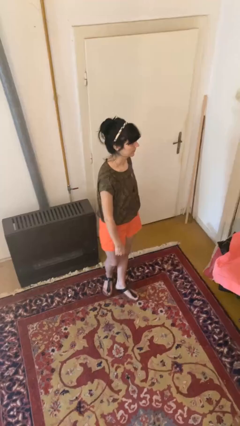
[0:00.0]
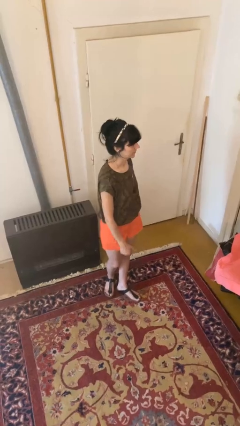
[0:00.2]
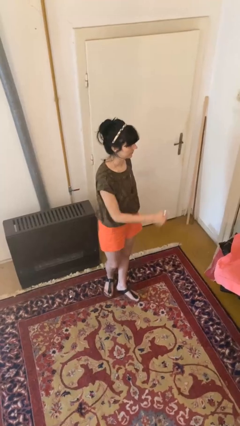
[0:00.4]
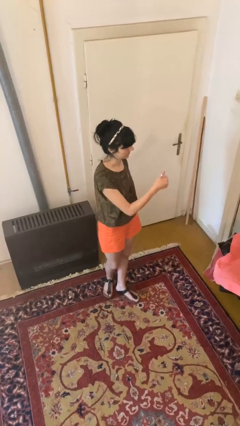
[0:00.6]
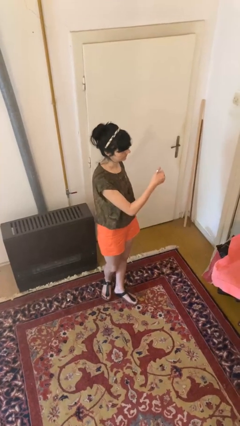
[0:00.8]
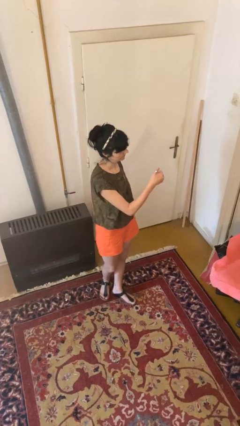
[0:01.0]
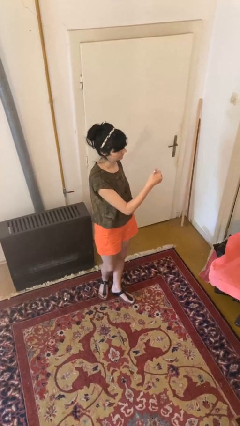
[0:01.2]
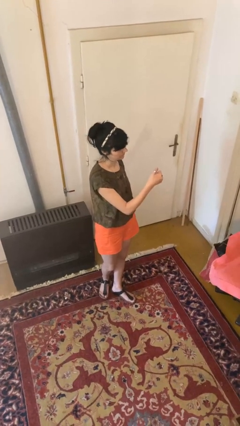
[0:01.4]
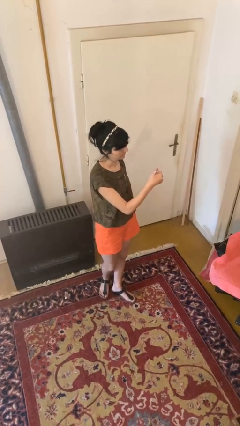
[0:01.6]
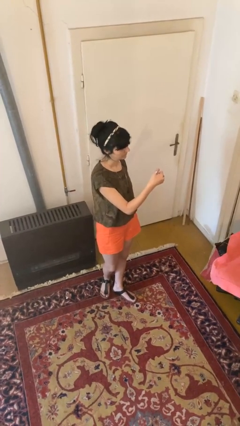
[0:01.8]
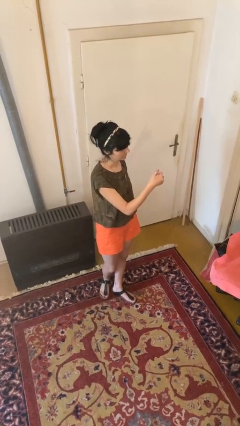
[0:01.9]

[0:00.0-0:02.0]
person gestures thumbs up

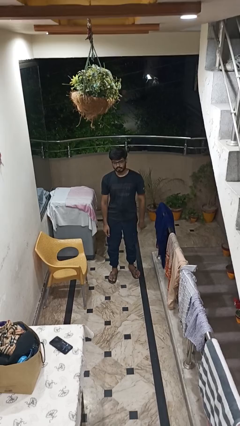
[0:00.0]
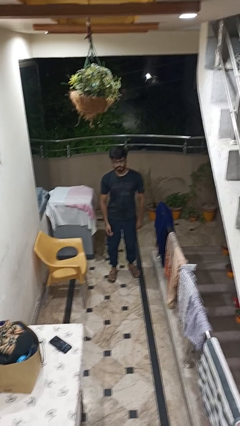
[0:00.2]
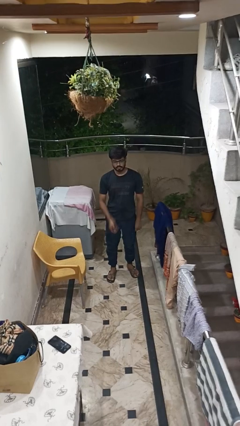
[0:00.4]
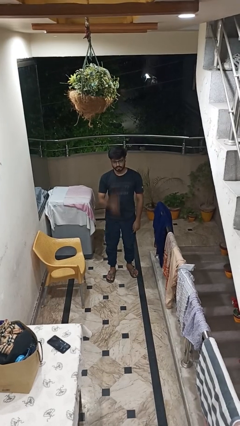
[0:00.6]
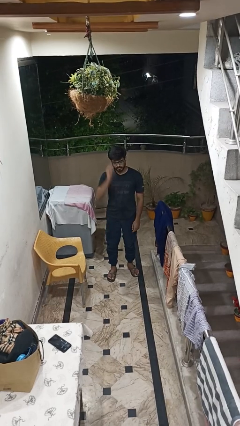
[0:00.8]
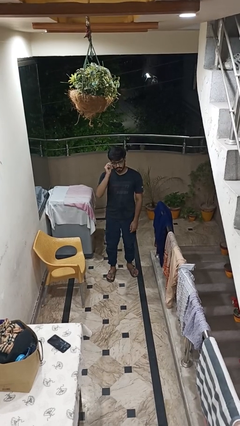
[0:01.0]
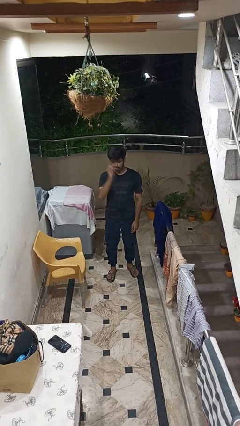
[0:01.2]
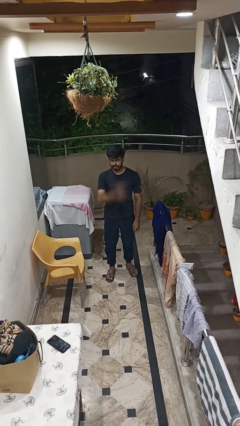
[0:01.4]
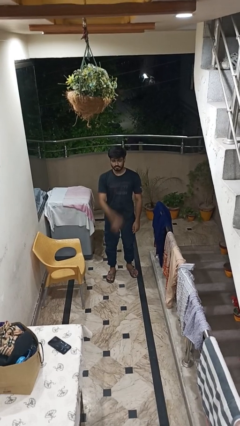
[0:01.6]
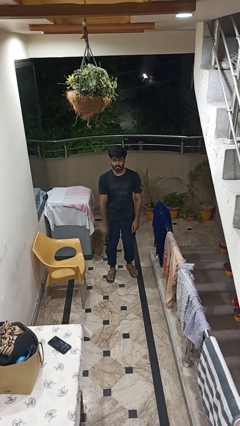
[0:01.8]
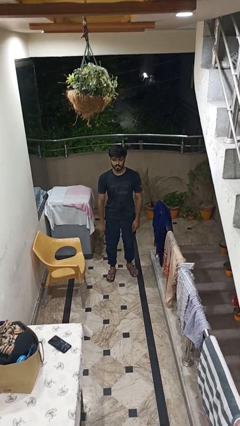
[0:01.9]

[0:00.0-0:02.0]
person takes off glasses

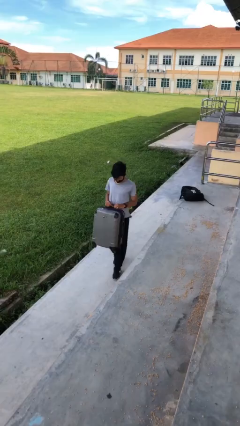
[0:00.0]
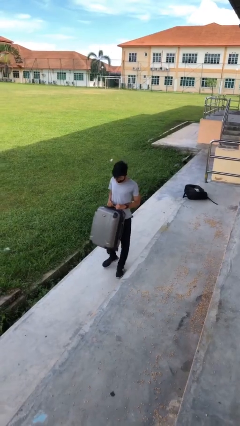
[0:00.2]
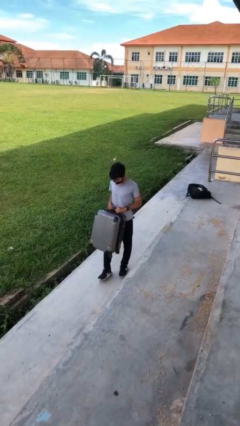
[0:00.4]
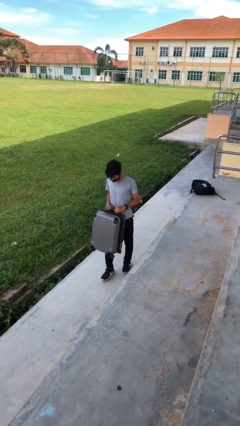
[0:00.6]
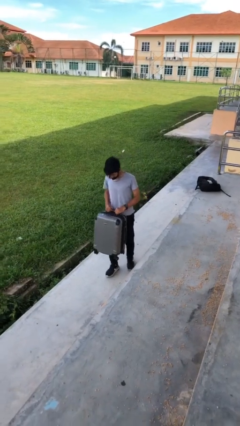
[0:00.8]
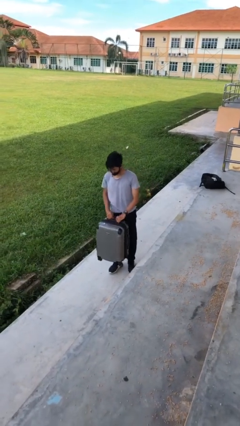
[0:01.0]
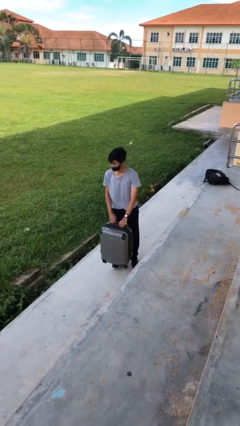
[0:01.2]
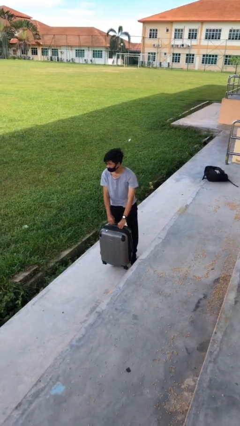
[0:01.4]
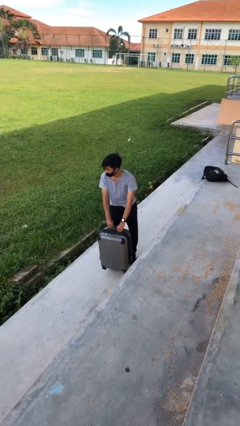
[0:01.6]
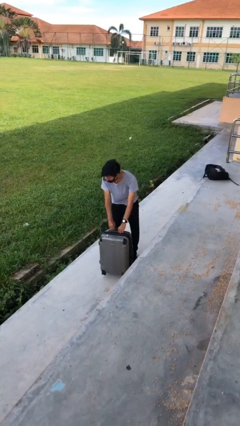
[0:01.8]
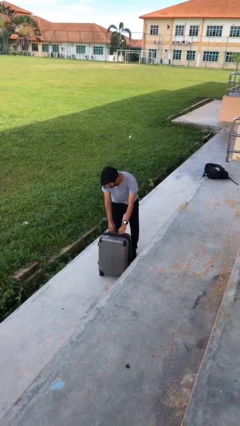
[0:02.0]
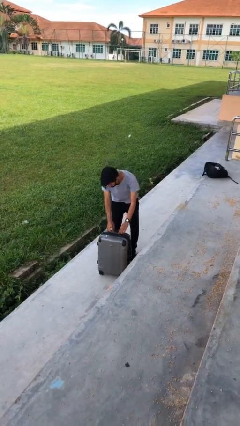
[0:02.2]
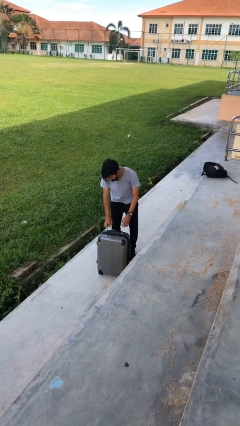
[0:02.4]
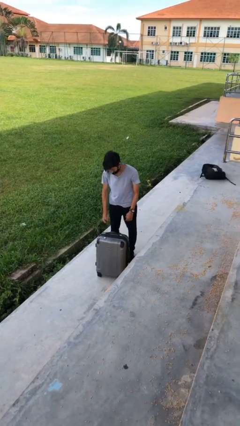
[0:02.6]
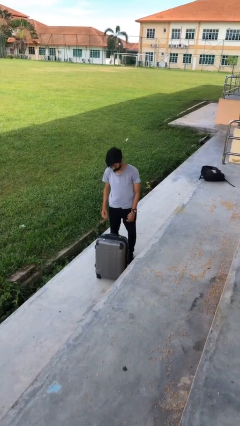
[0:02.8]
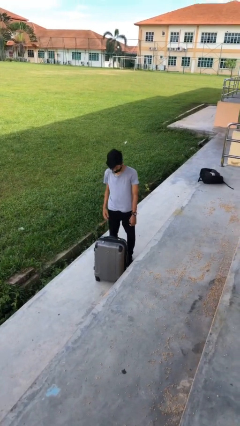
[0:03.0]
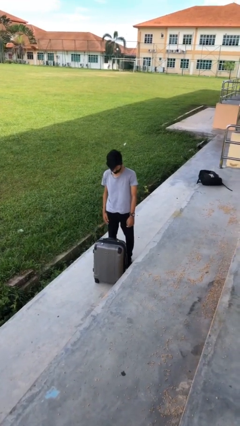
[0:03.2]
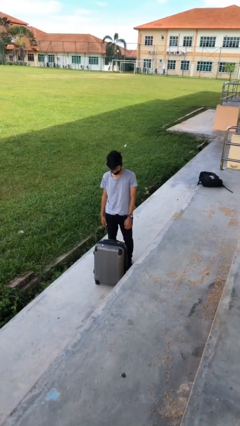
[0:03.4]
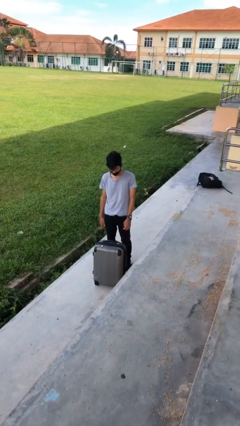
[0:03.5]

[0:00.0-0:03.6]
person puts down object on floor

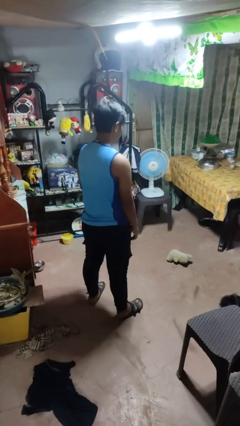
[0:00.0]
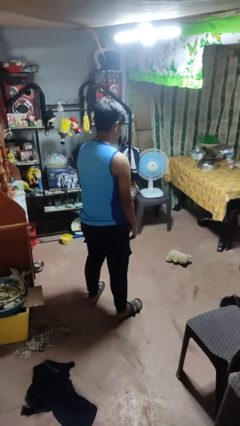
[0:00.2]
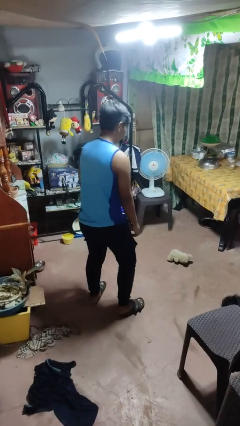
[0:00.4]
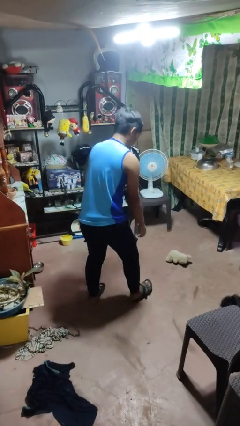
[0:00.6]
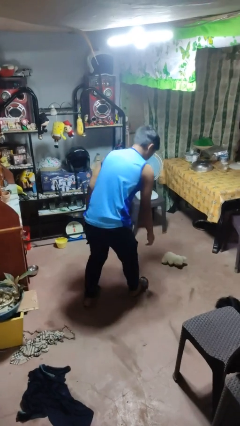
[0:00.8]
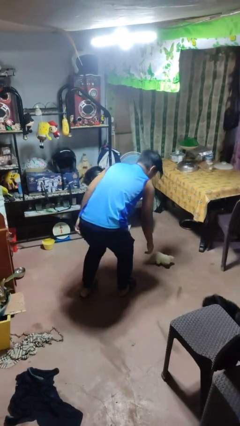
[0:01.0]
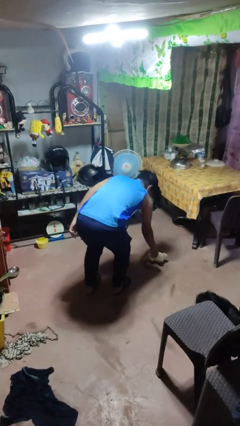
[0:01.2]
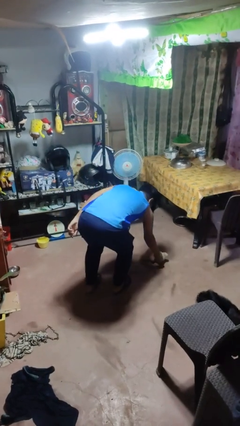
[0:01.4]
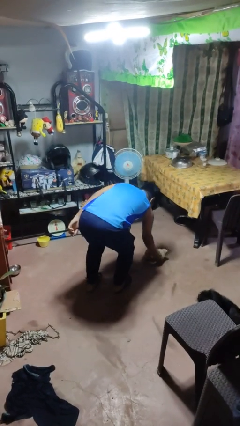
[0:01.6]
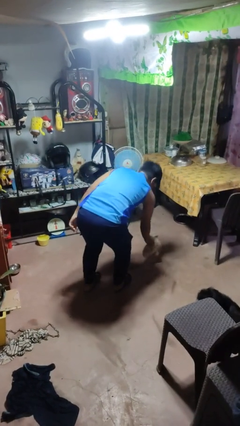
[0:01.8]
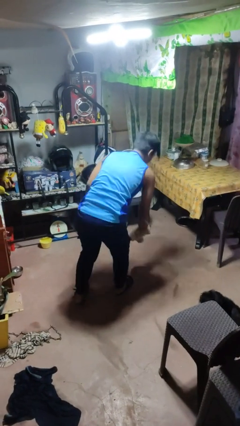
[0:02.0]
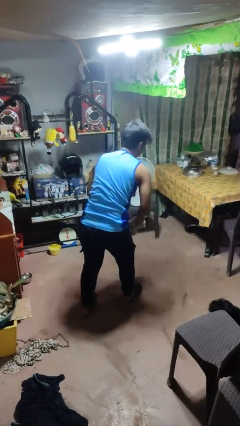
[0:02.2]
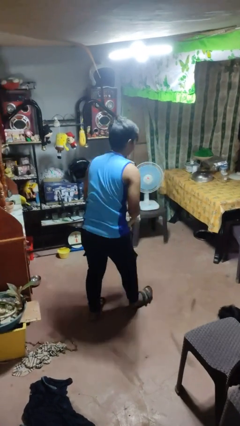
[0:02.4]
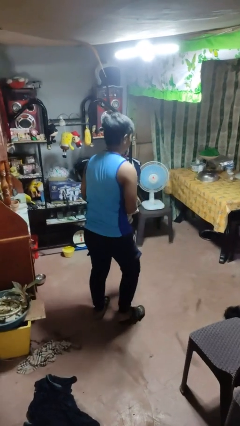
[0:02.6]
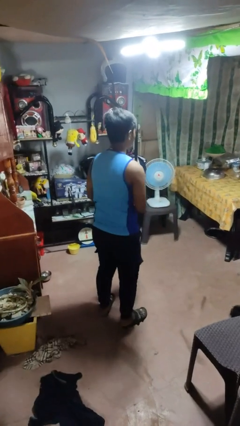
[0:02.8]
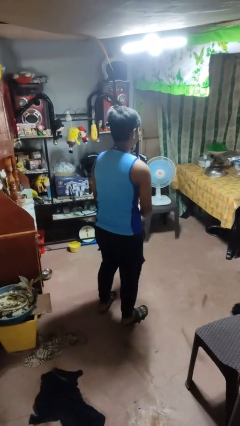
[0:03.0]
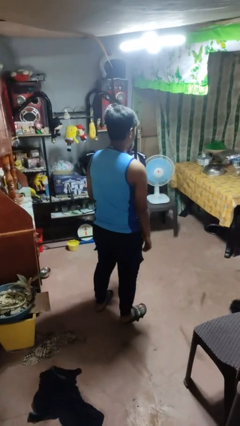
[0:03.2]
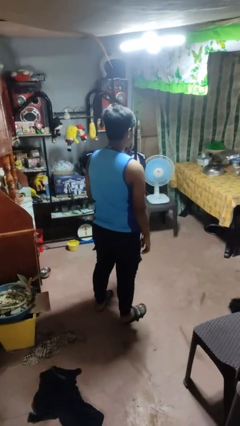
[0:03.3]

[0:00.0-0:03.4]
person picks up object from floor

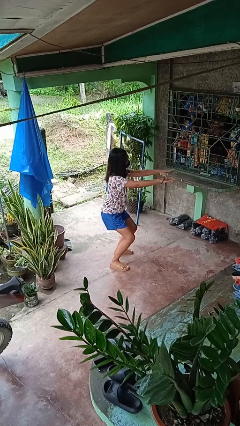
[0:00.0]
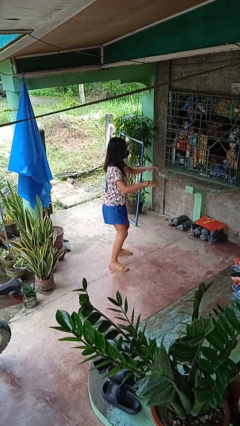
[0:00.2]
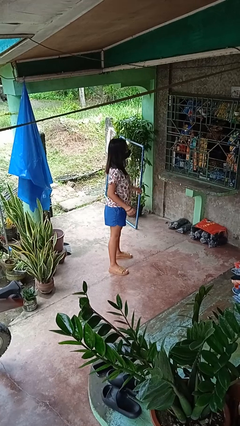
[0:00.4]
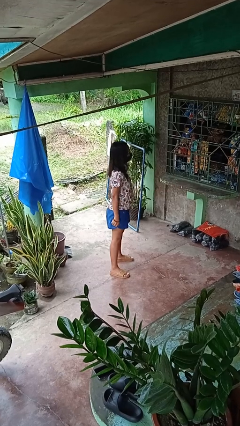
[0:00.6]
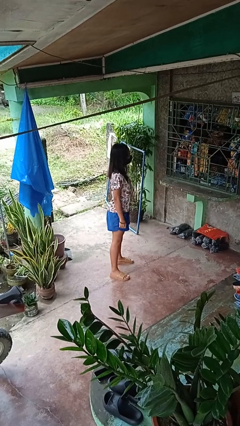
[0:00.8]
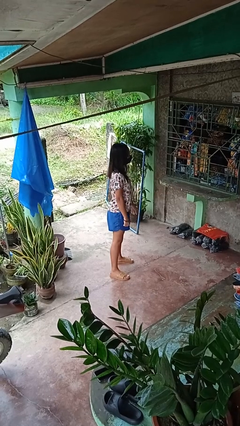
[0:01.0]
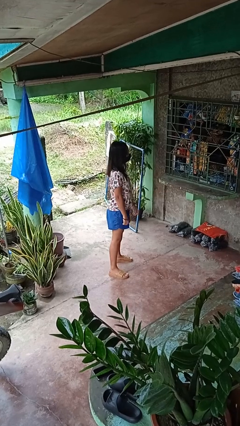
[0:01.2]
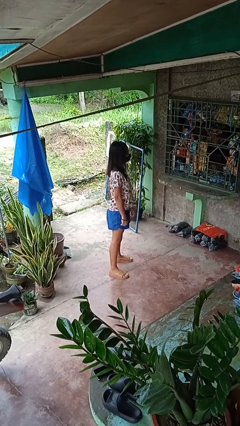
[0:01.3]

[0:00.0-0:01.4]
person stands up

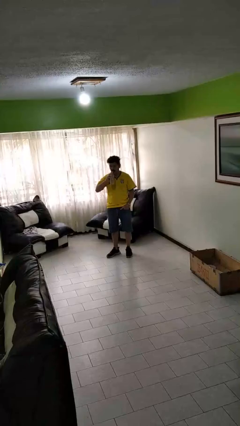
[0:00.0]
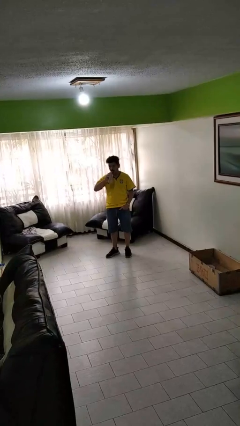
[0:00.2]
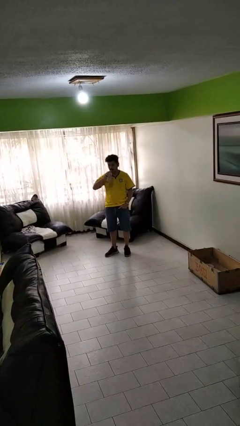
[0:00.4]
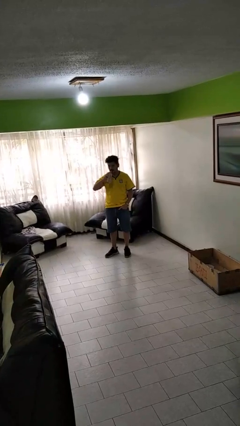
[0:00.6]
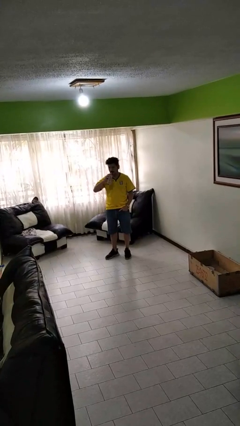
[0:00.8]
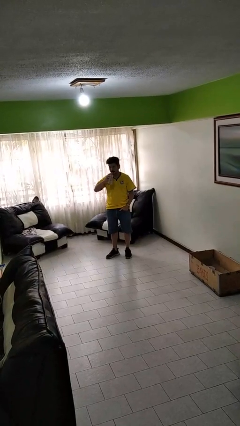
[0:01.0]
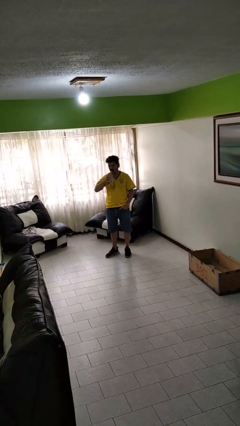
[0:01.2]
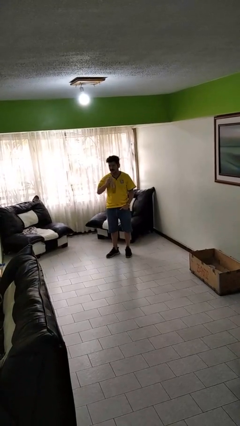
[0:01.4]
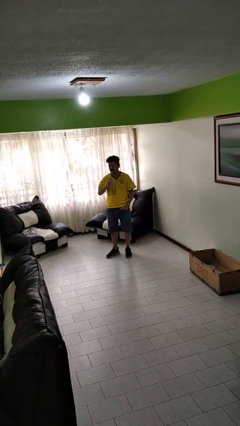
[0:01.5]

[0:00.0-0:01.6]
person drinks from straw

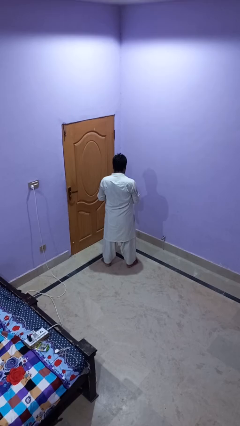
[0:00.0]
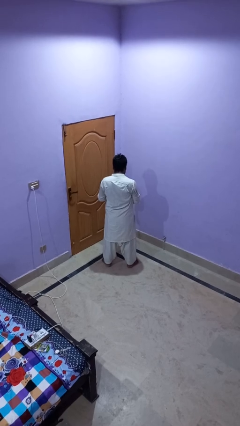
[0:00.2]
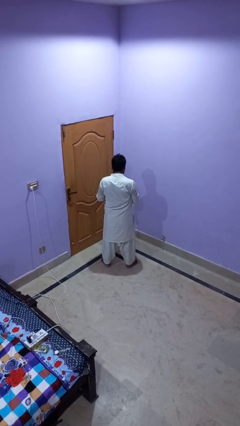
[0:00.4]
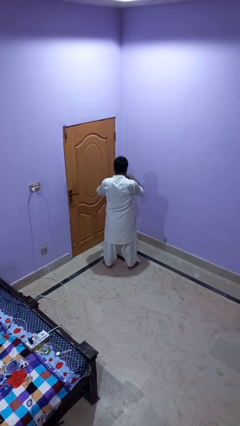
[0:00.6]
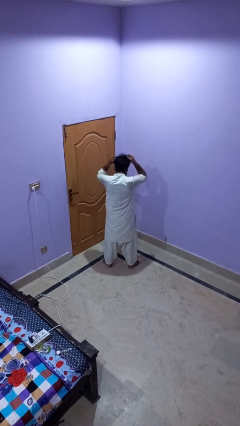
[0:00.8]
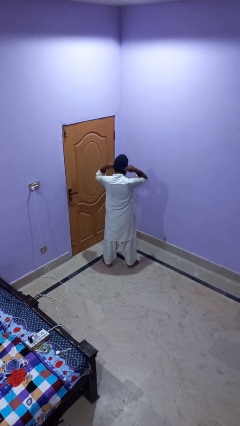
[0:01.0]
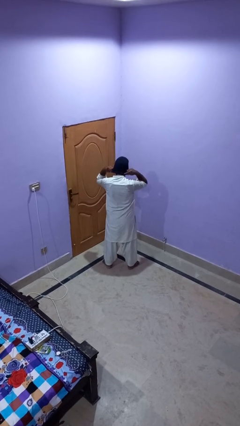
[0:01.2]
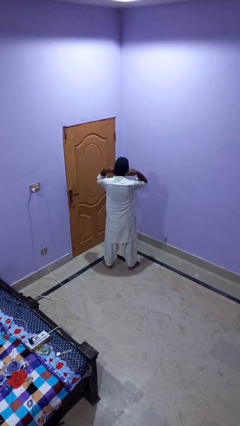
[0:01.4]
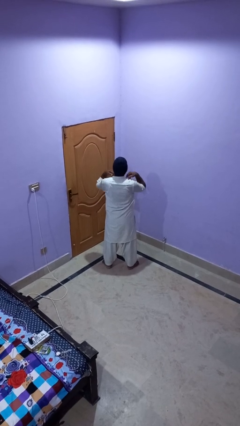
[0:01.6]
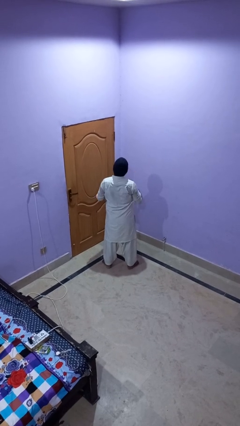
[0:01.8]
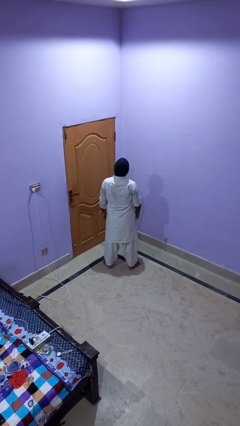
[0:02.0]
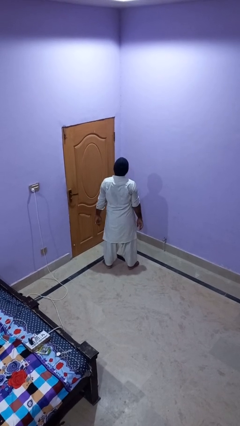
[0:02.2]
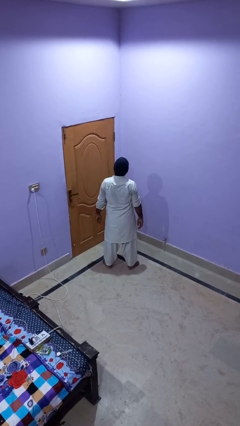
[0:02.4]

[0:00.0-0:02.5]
person puts on hat

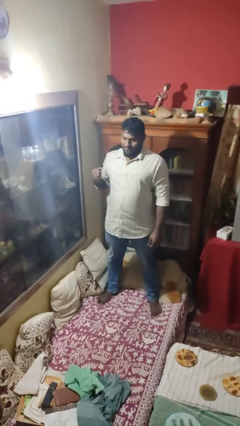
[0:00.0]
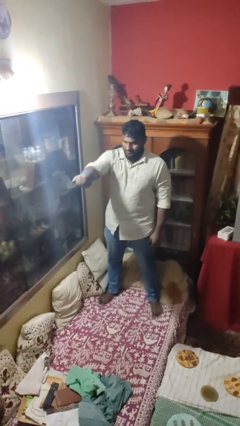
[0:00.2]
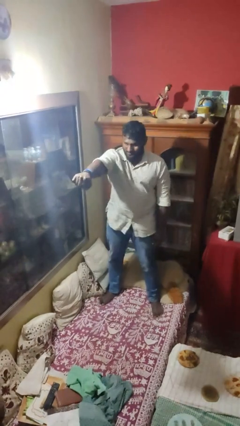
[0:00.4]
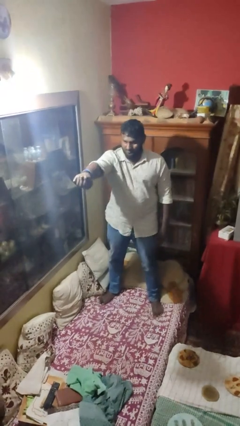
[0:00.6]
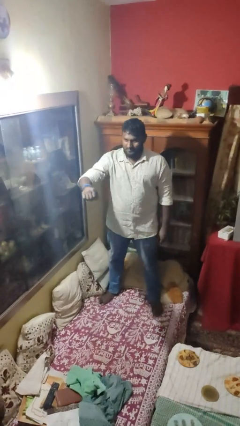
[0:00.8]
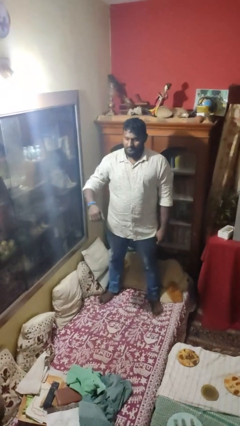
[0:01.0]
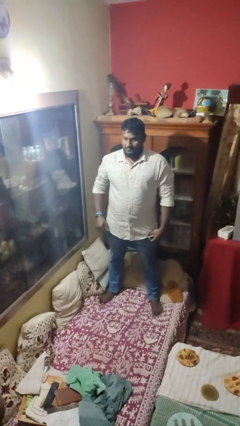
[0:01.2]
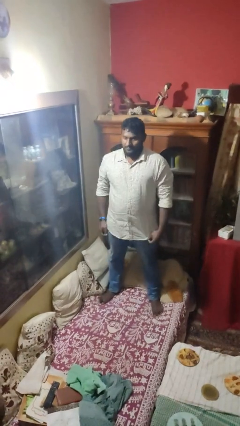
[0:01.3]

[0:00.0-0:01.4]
person punches
